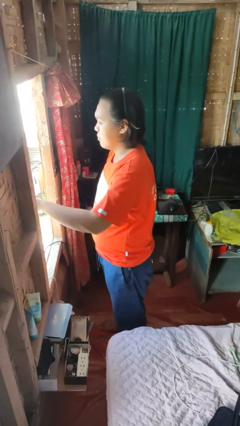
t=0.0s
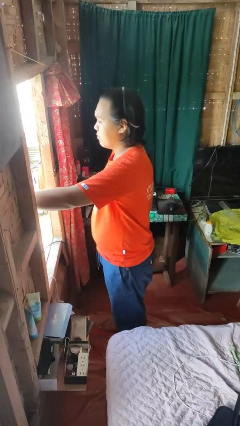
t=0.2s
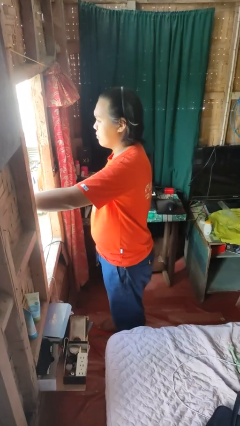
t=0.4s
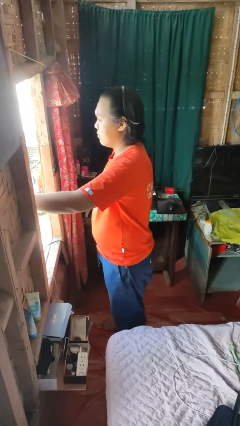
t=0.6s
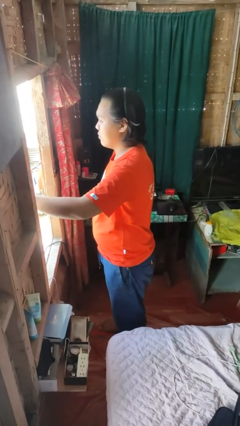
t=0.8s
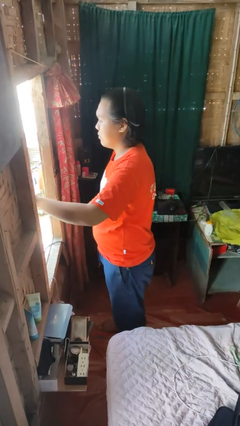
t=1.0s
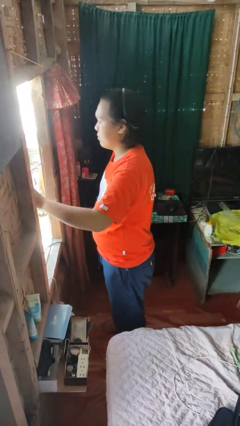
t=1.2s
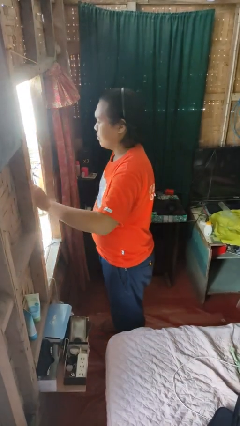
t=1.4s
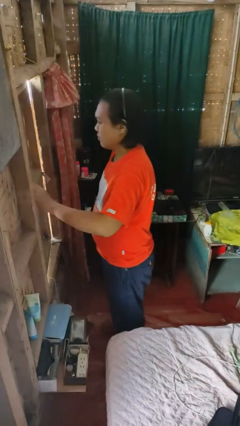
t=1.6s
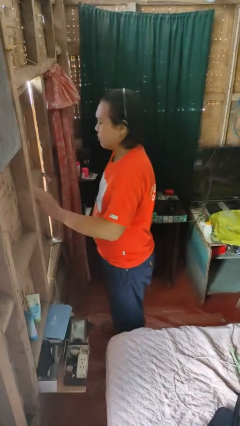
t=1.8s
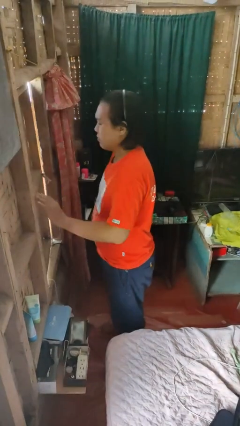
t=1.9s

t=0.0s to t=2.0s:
person closes home window

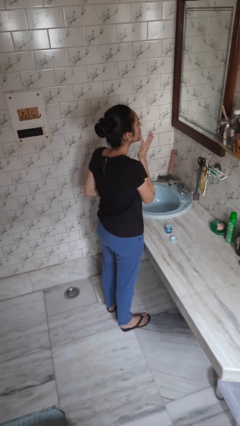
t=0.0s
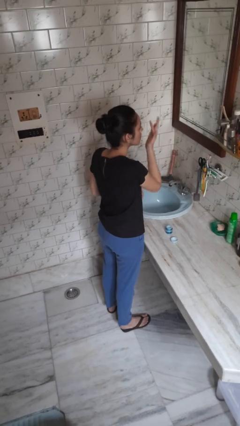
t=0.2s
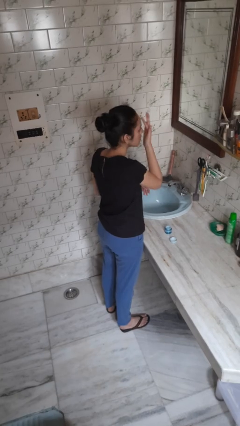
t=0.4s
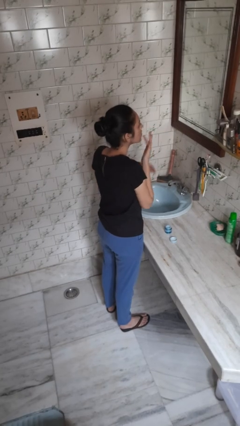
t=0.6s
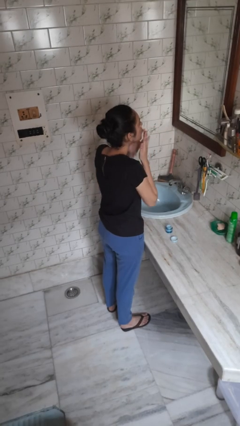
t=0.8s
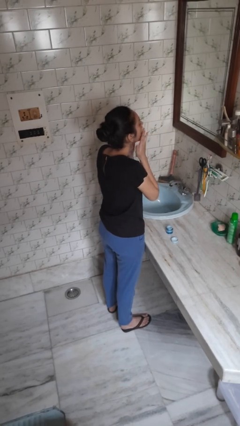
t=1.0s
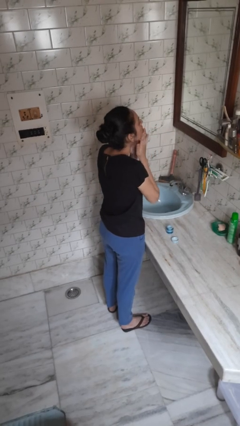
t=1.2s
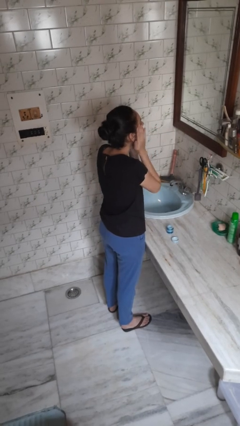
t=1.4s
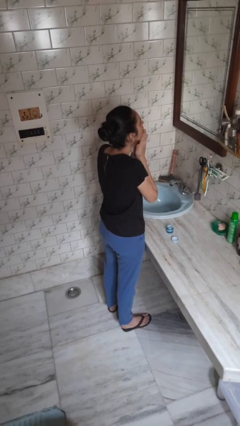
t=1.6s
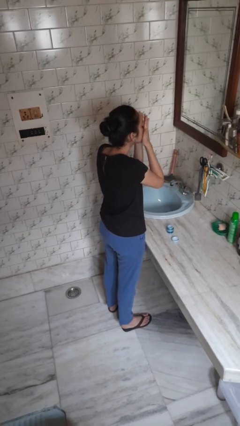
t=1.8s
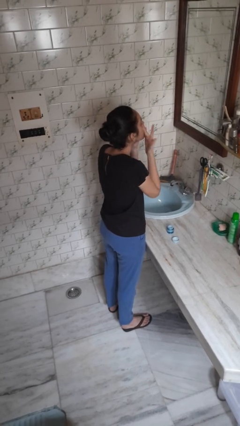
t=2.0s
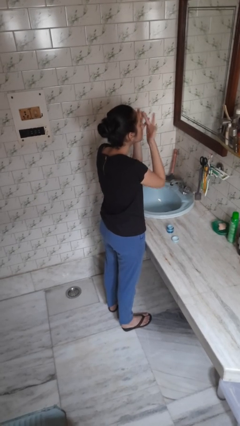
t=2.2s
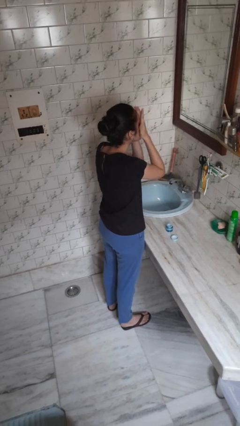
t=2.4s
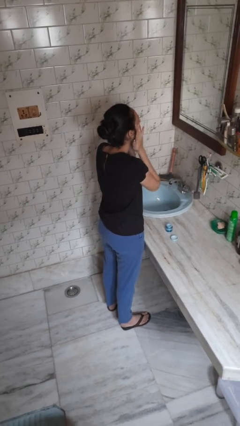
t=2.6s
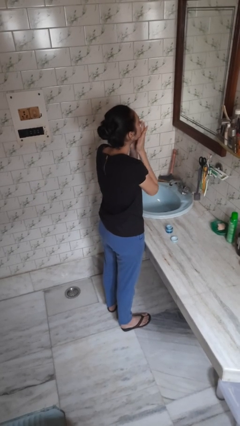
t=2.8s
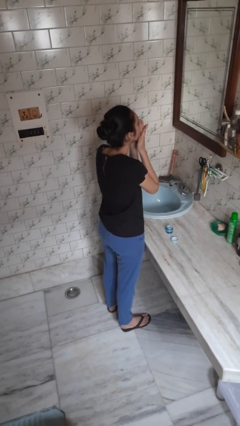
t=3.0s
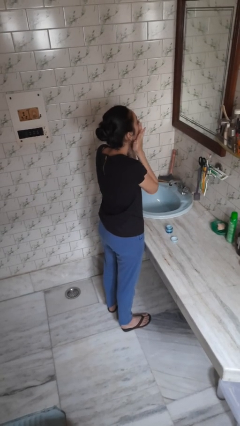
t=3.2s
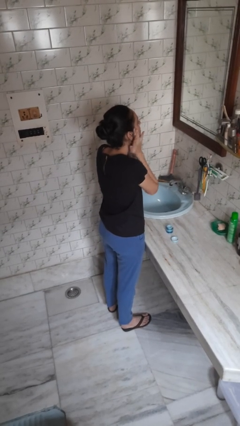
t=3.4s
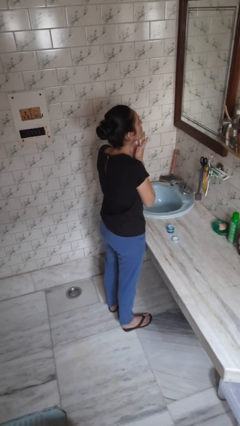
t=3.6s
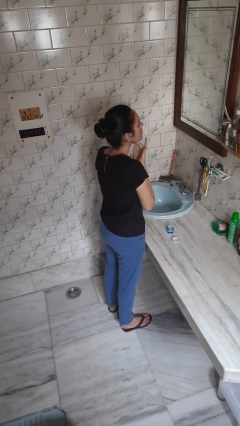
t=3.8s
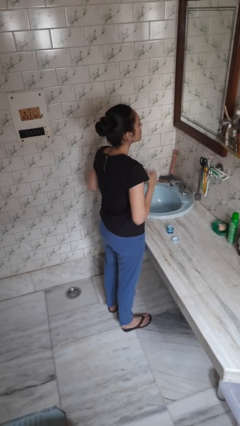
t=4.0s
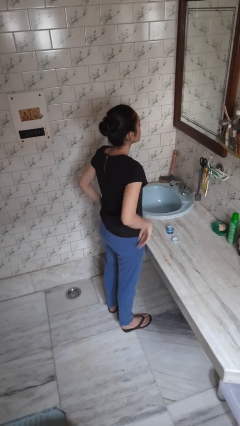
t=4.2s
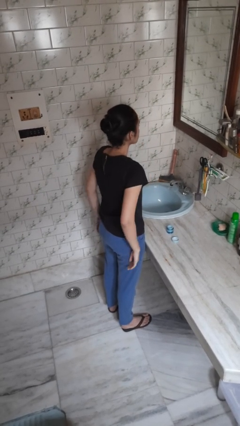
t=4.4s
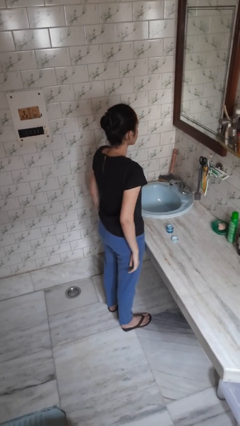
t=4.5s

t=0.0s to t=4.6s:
person applies facial moisturizer

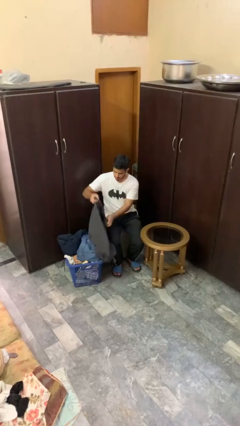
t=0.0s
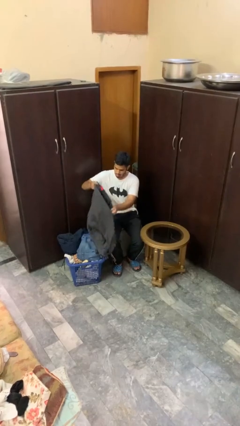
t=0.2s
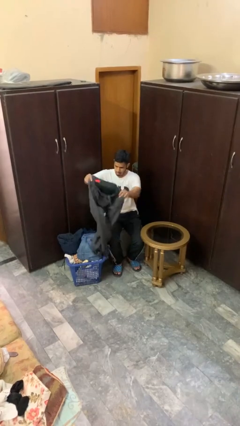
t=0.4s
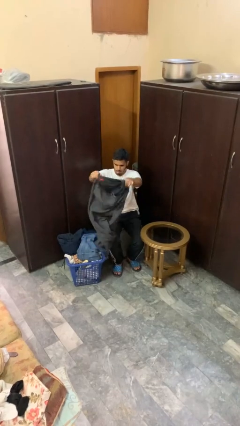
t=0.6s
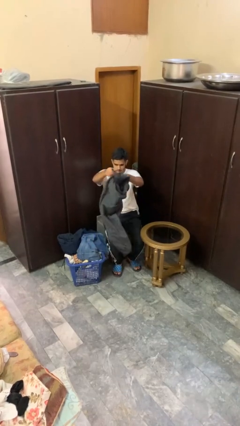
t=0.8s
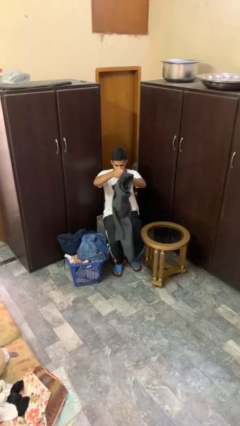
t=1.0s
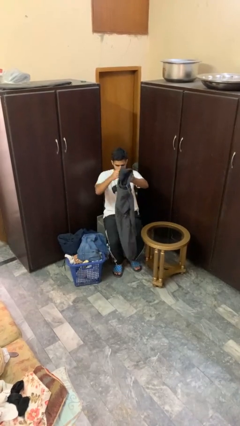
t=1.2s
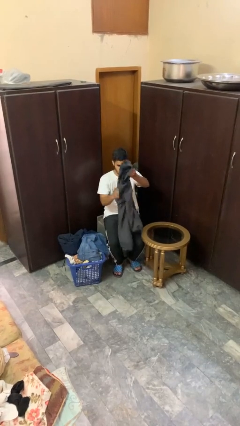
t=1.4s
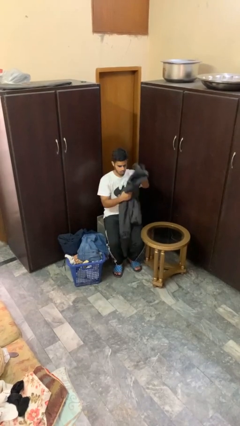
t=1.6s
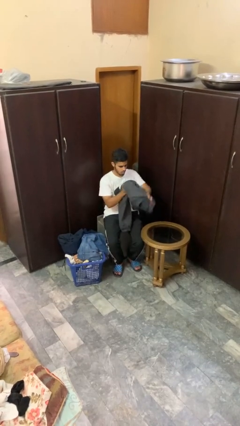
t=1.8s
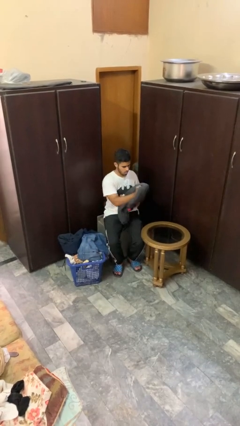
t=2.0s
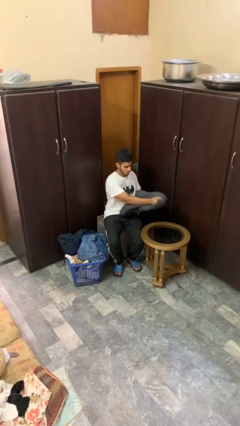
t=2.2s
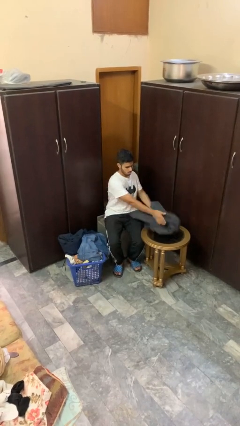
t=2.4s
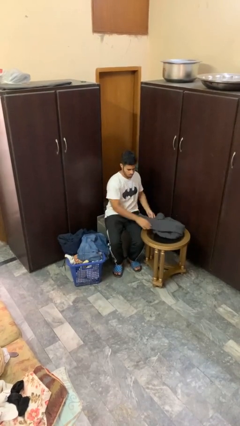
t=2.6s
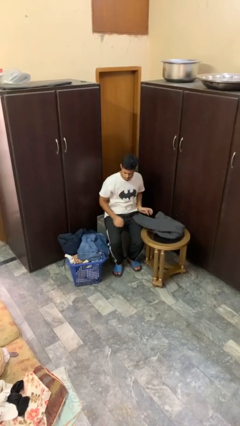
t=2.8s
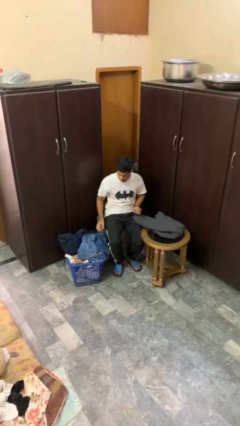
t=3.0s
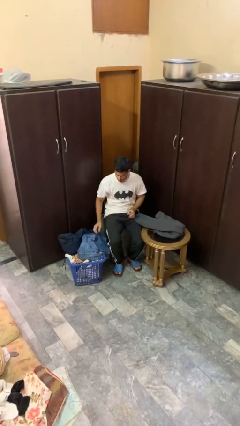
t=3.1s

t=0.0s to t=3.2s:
person folds pants

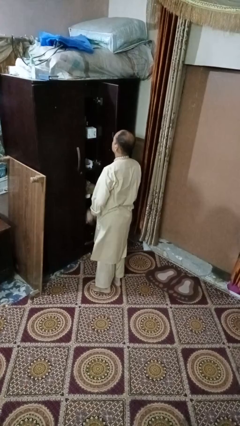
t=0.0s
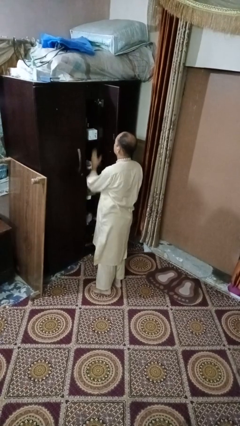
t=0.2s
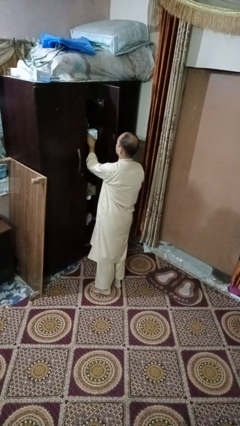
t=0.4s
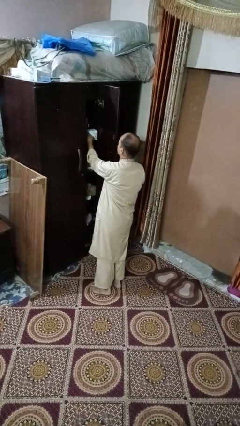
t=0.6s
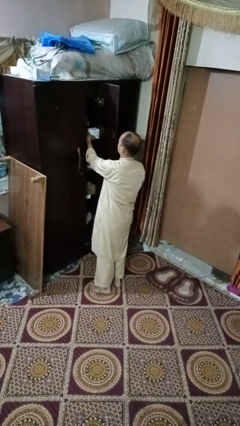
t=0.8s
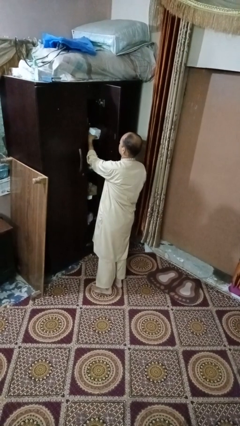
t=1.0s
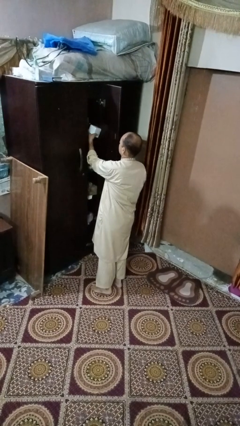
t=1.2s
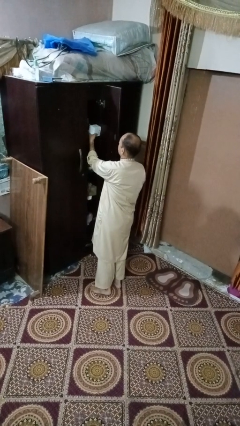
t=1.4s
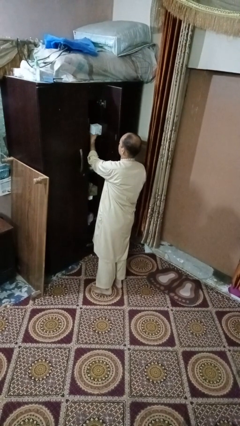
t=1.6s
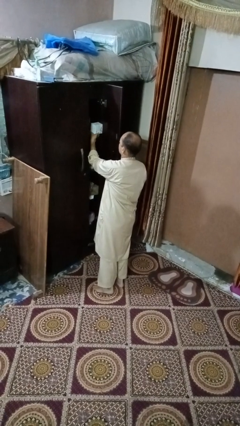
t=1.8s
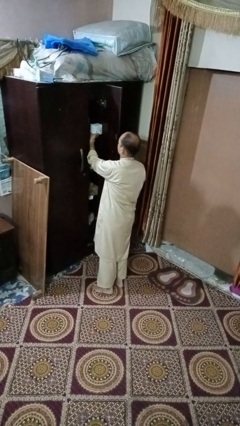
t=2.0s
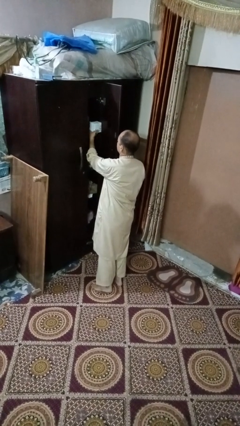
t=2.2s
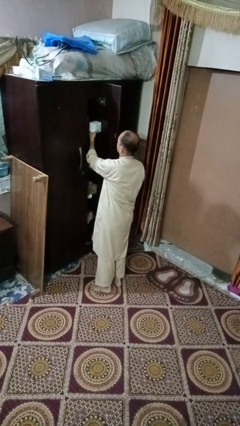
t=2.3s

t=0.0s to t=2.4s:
person picks up object from cabinet

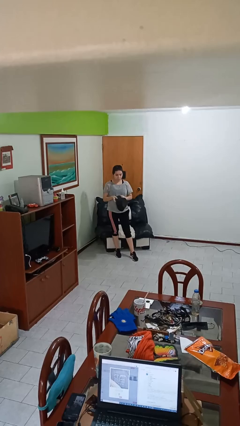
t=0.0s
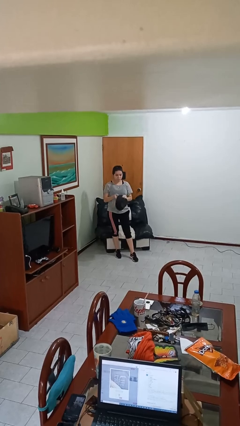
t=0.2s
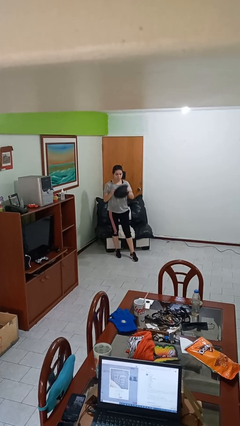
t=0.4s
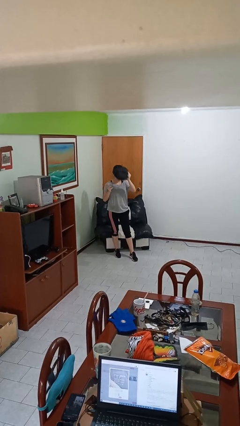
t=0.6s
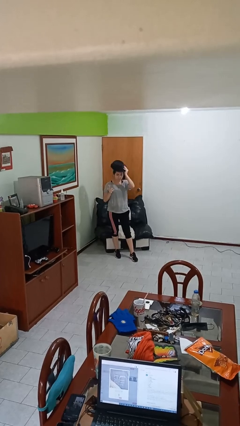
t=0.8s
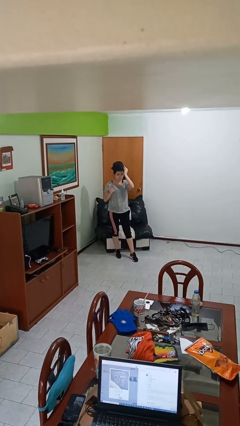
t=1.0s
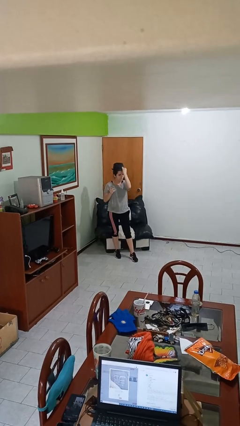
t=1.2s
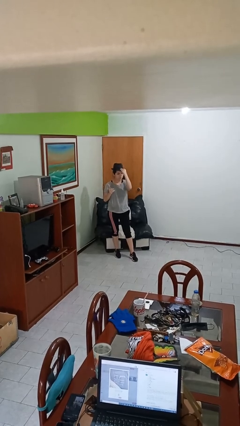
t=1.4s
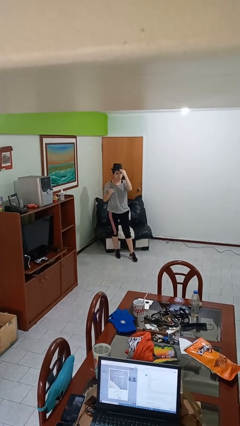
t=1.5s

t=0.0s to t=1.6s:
person puts on hat

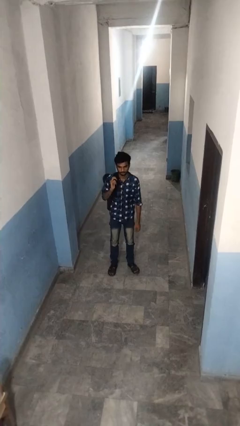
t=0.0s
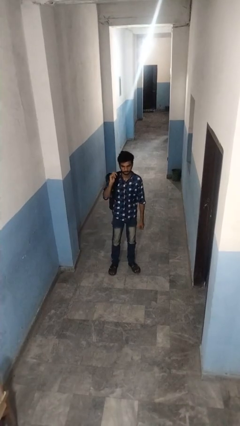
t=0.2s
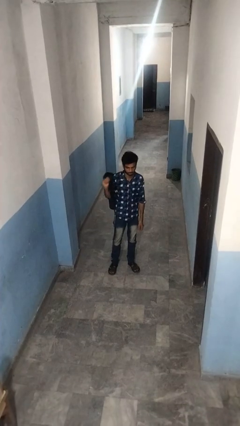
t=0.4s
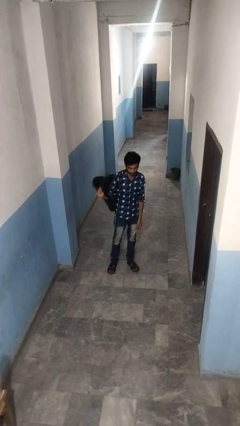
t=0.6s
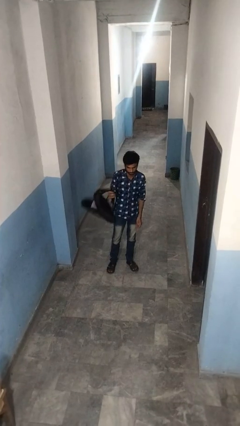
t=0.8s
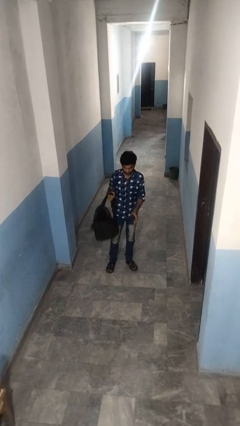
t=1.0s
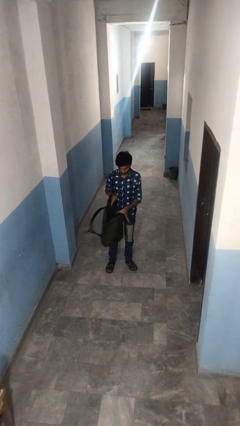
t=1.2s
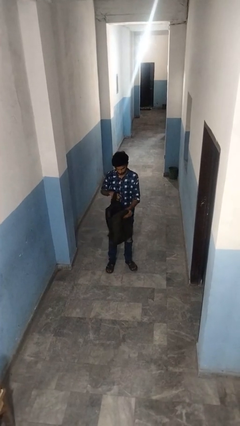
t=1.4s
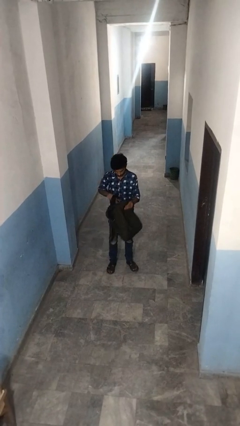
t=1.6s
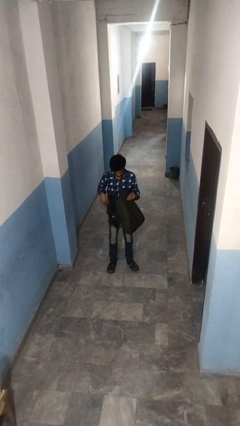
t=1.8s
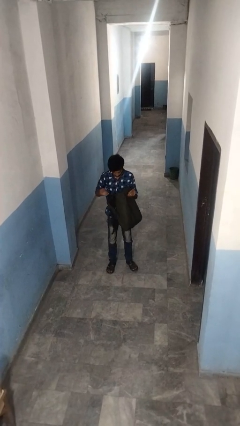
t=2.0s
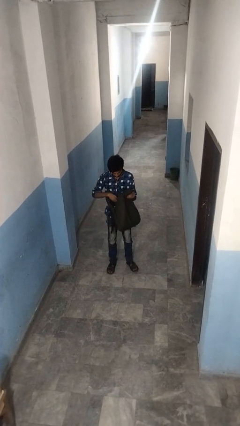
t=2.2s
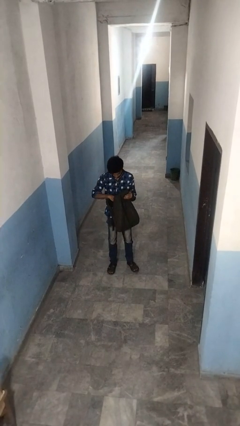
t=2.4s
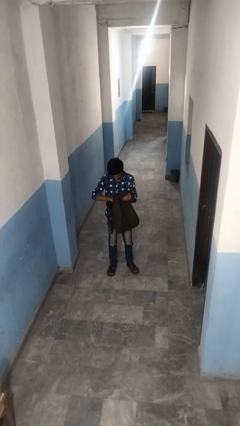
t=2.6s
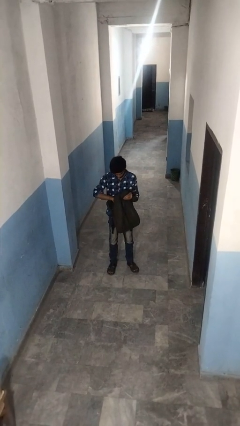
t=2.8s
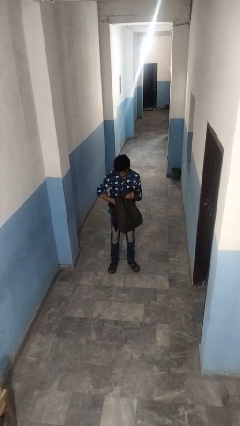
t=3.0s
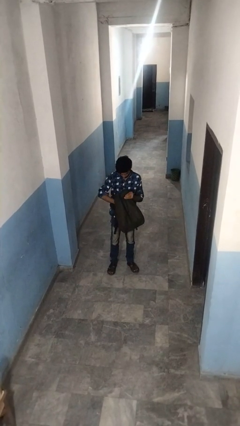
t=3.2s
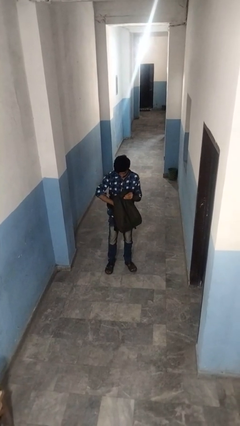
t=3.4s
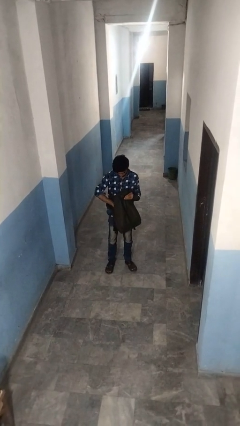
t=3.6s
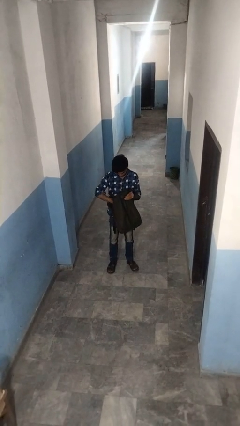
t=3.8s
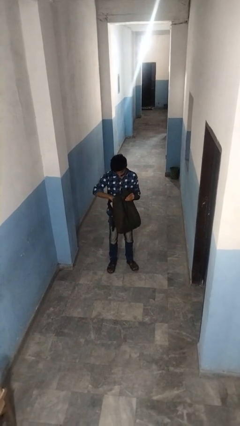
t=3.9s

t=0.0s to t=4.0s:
person searches in backpack
